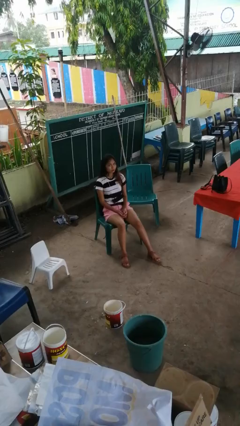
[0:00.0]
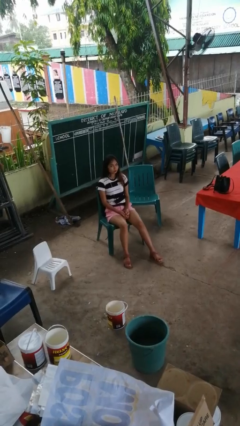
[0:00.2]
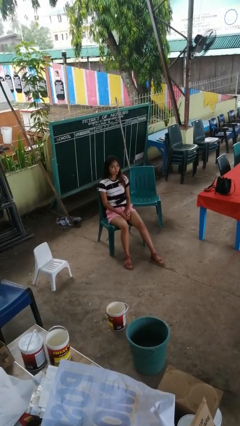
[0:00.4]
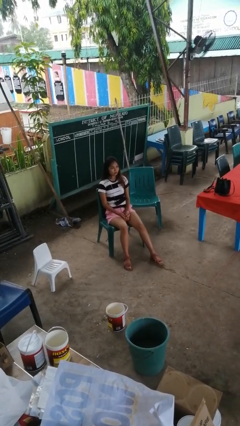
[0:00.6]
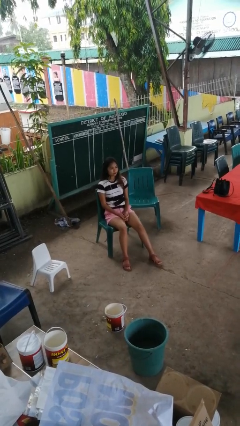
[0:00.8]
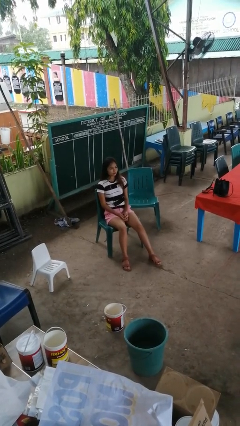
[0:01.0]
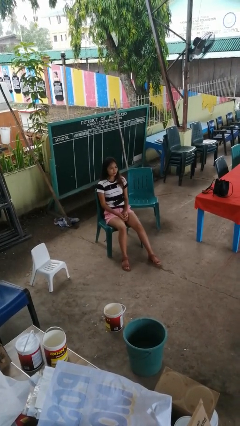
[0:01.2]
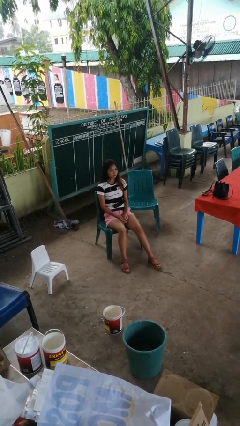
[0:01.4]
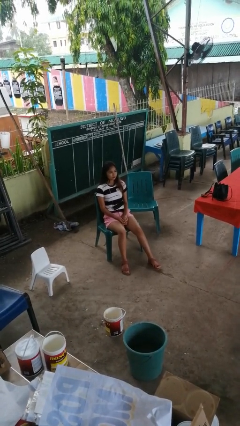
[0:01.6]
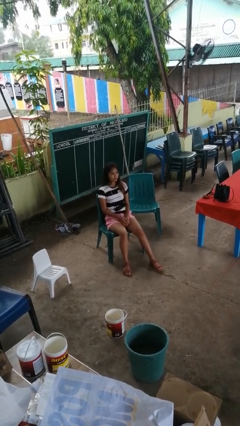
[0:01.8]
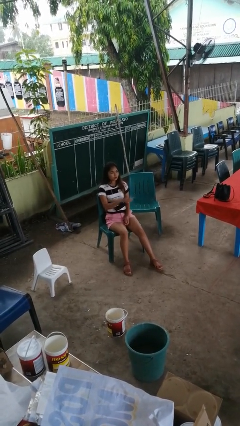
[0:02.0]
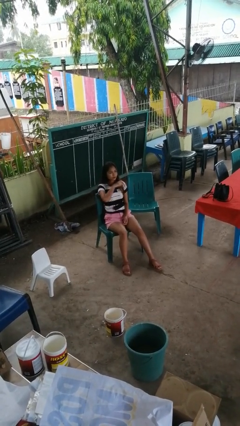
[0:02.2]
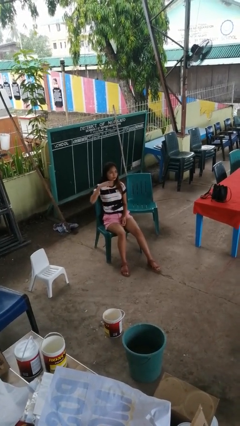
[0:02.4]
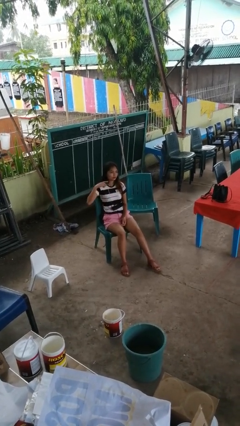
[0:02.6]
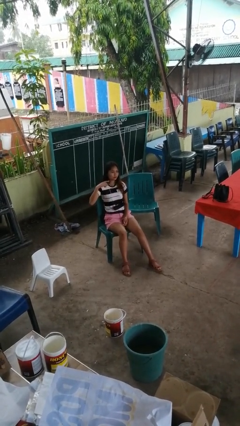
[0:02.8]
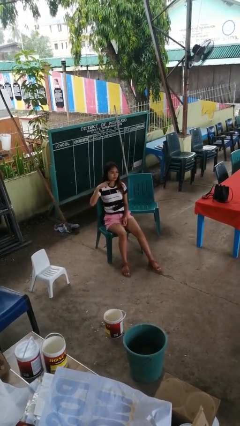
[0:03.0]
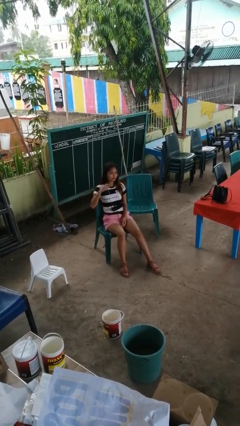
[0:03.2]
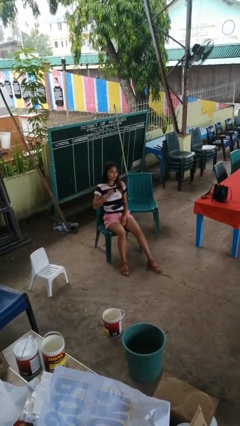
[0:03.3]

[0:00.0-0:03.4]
person gestures cut

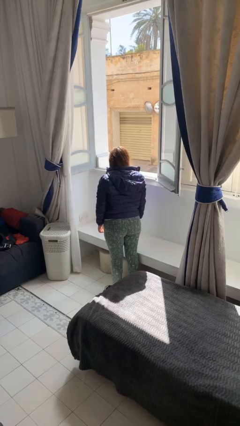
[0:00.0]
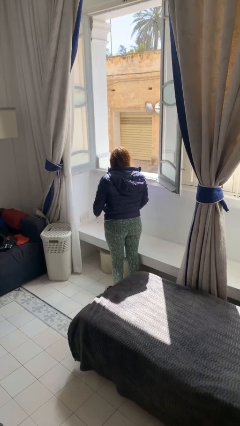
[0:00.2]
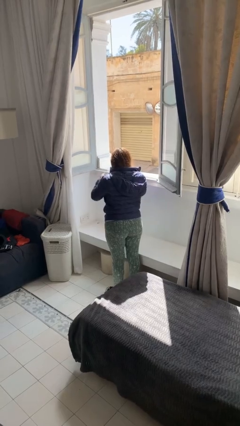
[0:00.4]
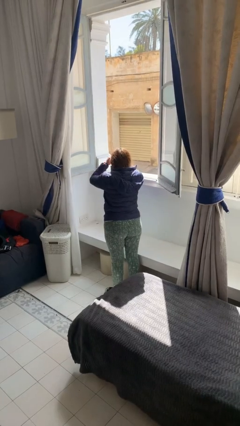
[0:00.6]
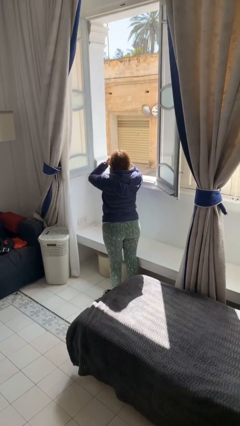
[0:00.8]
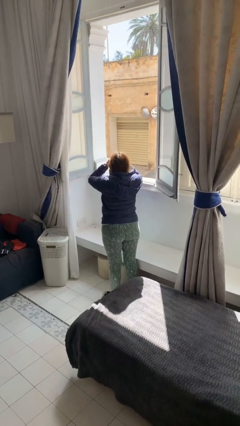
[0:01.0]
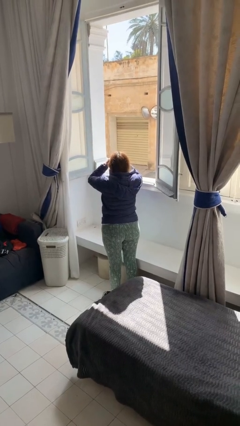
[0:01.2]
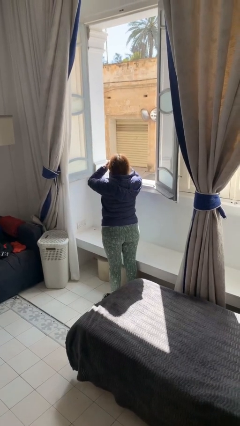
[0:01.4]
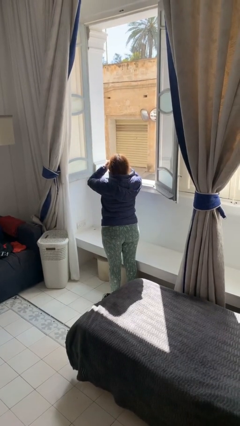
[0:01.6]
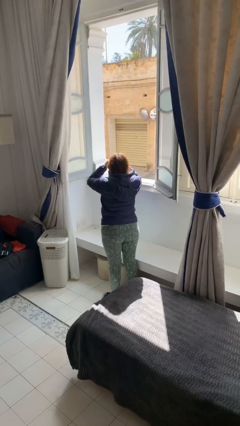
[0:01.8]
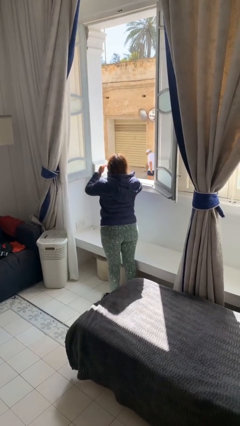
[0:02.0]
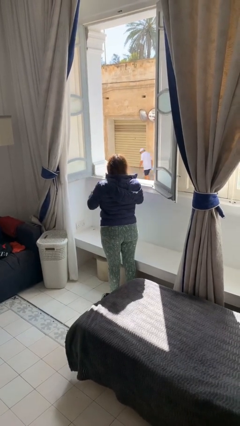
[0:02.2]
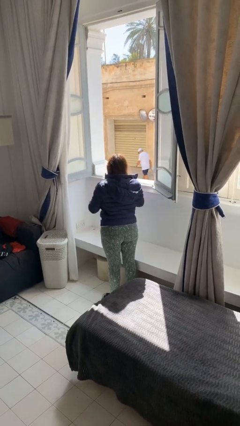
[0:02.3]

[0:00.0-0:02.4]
person shades eyes

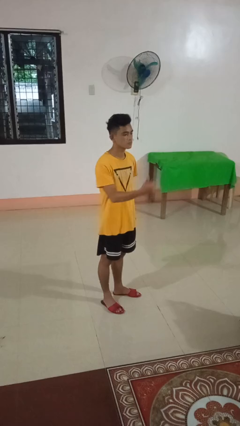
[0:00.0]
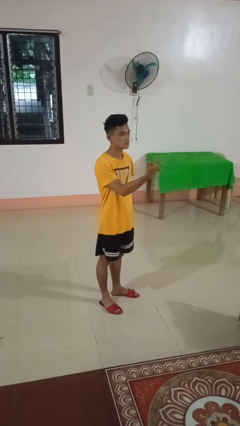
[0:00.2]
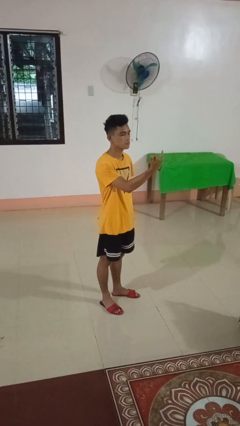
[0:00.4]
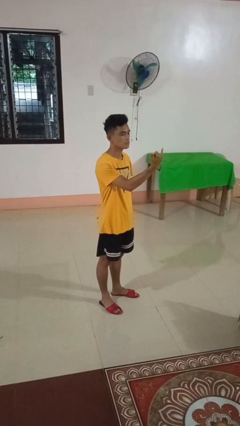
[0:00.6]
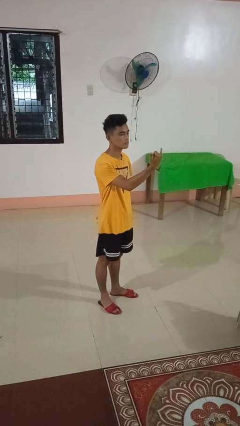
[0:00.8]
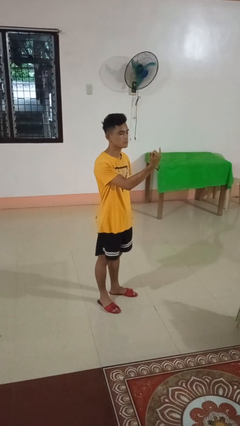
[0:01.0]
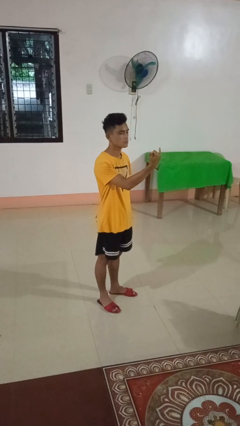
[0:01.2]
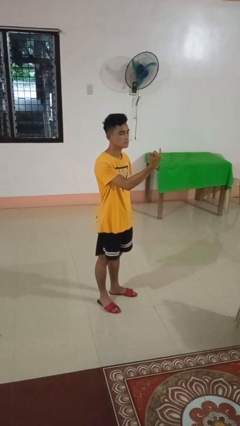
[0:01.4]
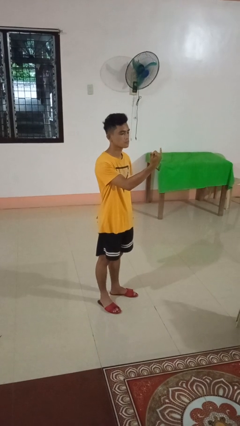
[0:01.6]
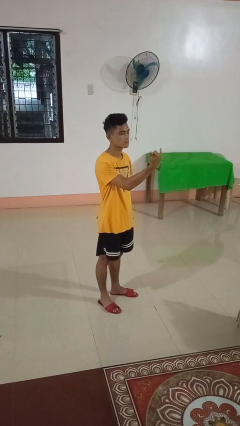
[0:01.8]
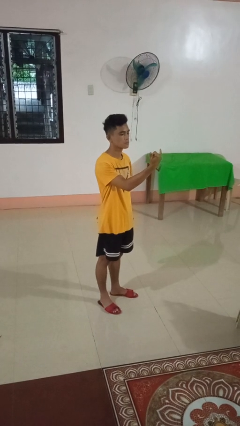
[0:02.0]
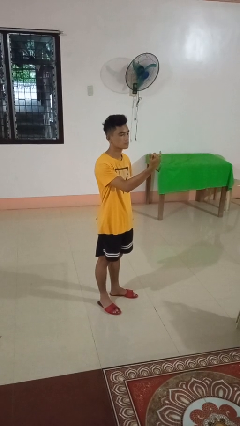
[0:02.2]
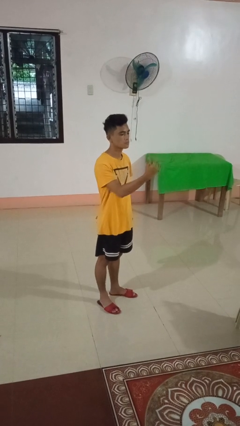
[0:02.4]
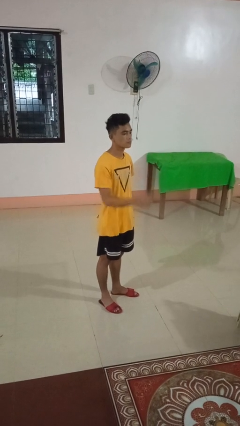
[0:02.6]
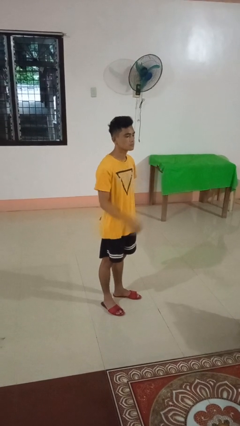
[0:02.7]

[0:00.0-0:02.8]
person gestures hang loose

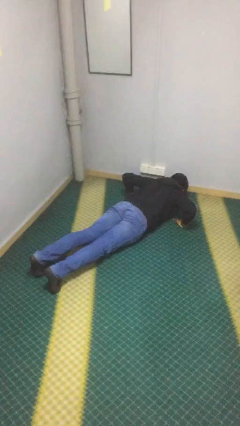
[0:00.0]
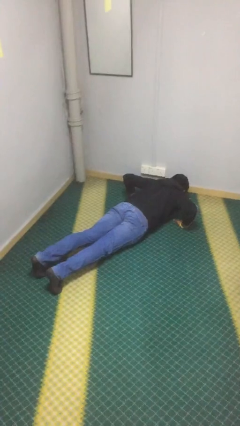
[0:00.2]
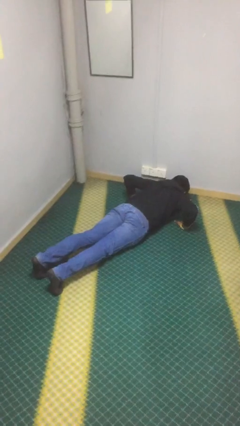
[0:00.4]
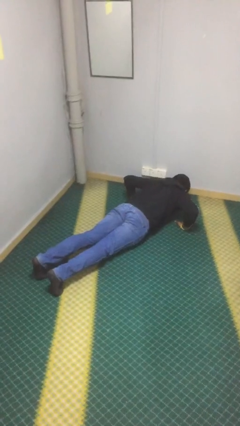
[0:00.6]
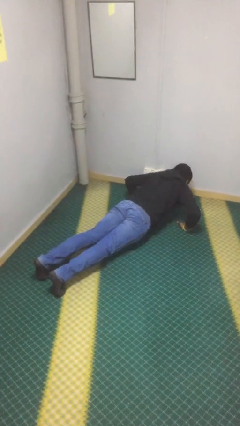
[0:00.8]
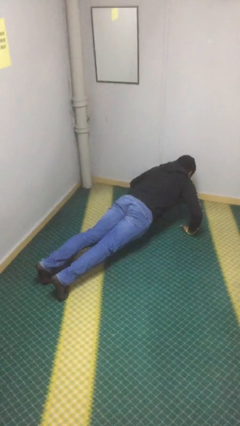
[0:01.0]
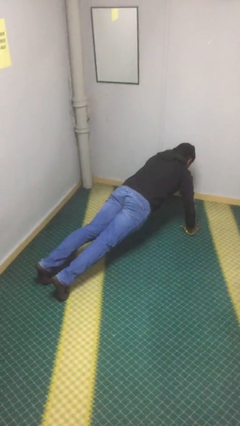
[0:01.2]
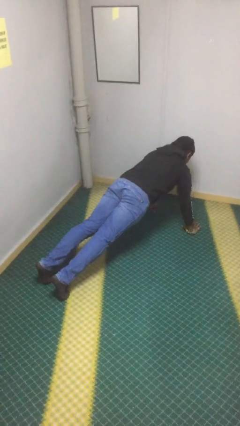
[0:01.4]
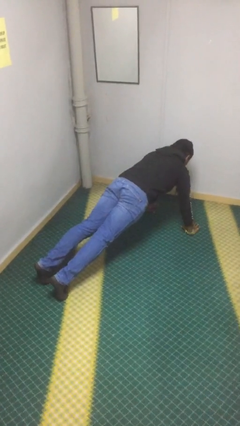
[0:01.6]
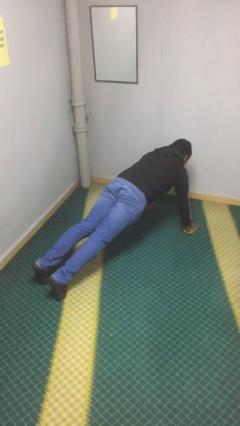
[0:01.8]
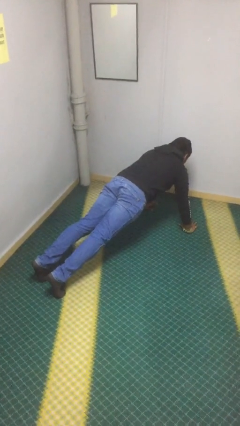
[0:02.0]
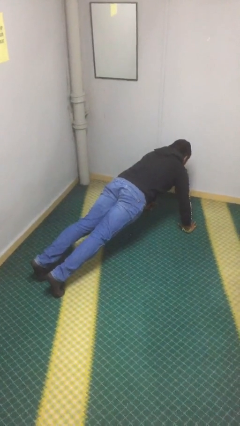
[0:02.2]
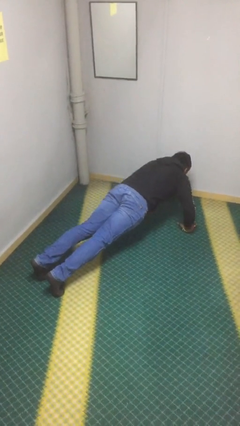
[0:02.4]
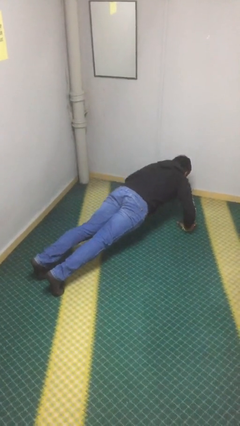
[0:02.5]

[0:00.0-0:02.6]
person exercises with pushup

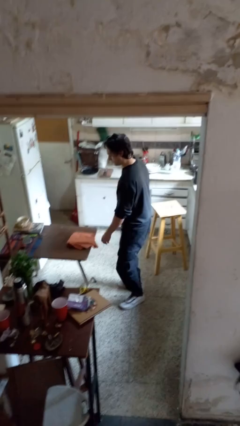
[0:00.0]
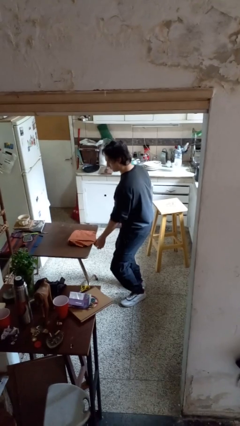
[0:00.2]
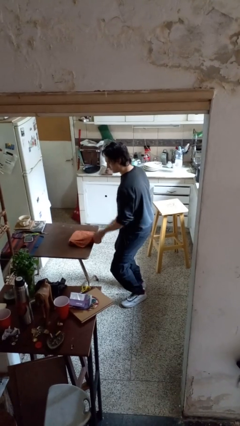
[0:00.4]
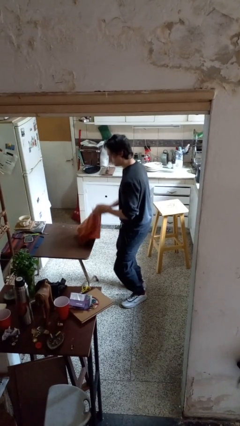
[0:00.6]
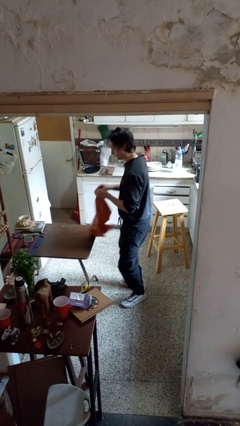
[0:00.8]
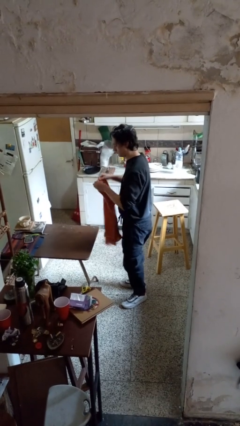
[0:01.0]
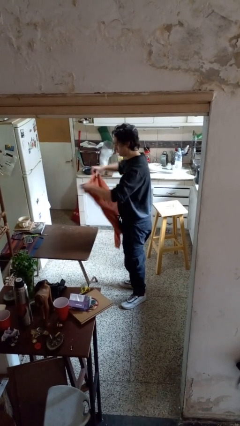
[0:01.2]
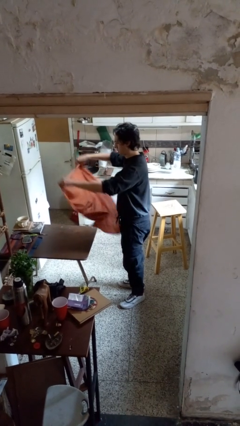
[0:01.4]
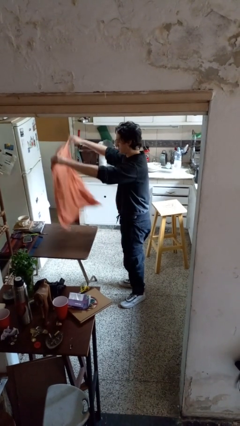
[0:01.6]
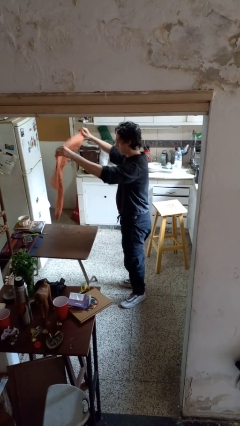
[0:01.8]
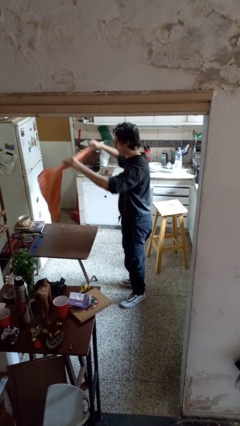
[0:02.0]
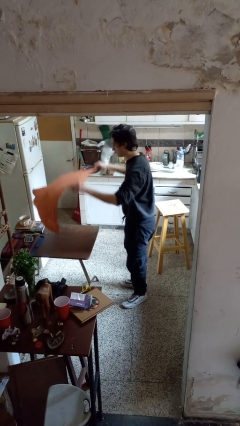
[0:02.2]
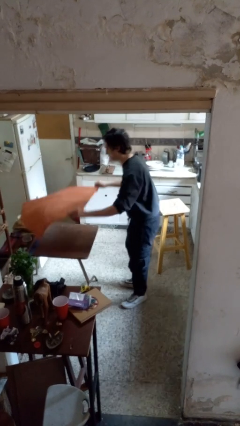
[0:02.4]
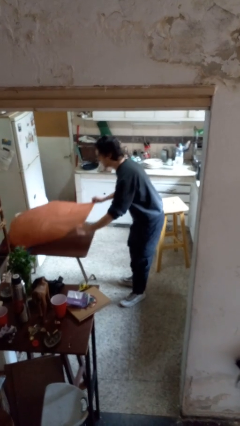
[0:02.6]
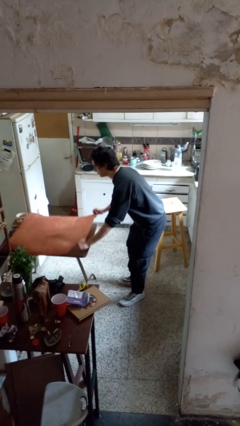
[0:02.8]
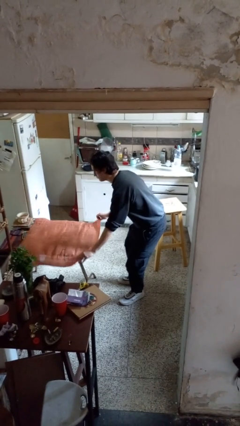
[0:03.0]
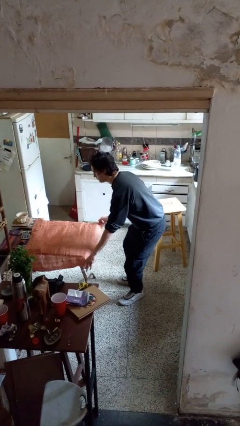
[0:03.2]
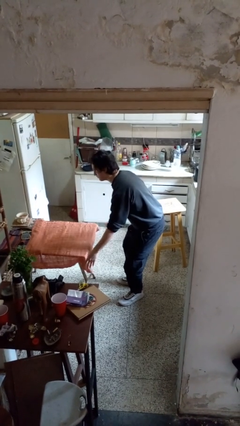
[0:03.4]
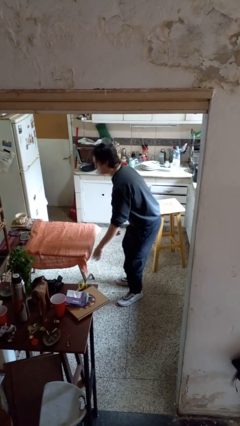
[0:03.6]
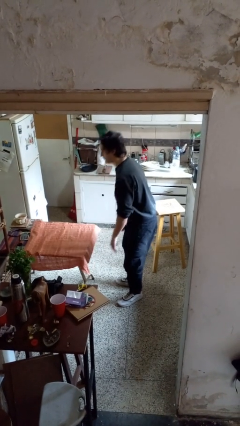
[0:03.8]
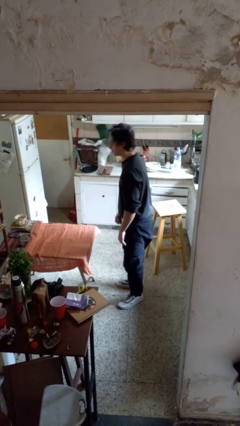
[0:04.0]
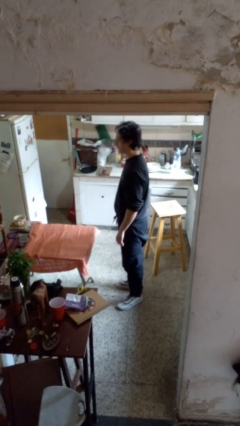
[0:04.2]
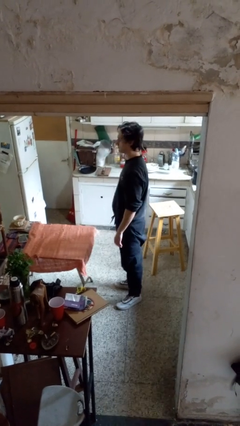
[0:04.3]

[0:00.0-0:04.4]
person spreads tablecloth

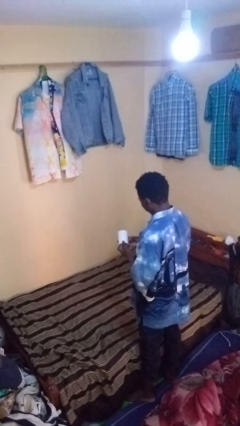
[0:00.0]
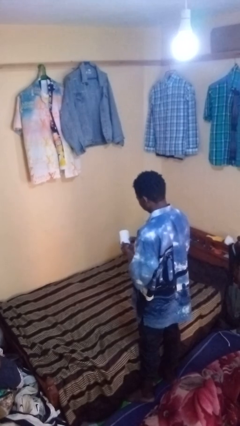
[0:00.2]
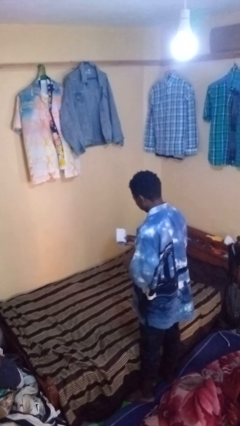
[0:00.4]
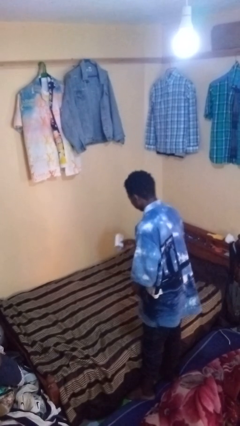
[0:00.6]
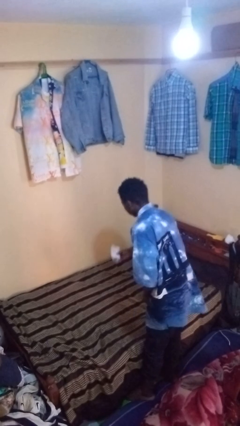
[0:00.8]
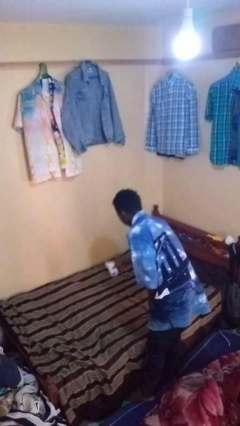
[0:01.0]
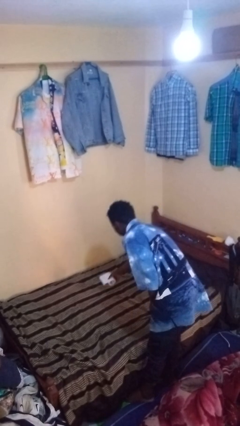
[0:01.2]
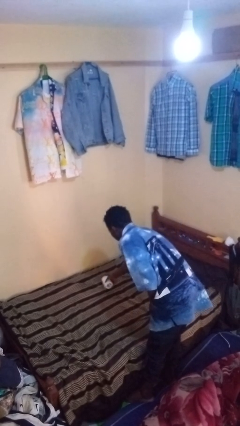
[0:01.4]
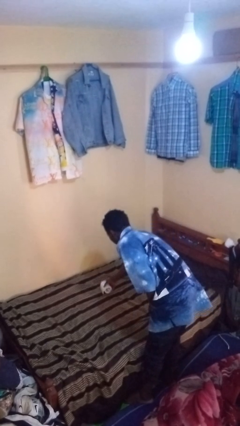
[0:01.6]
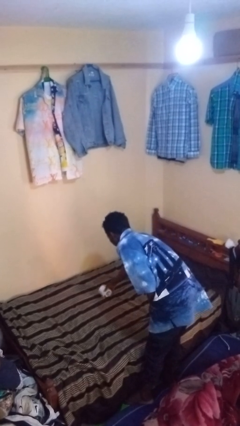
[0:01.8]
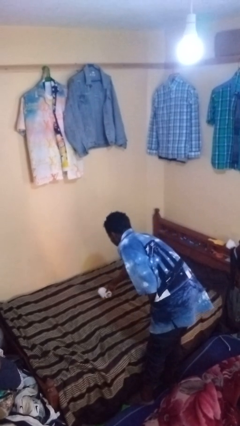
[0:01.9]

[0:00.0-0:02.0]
person puts down object on bed
